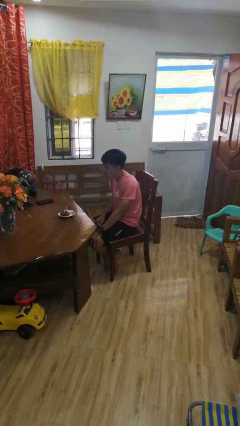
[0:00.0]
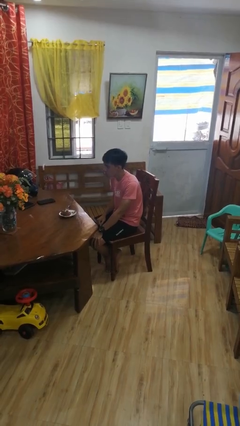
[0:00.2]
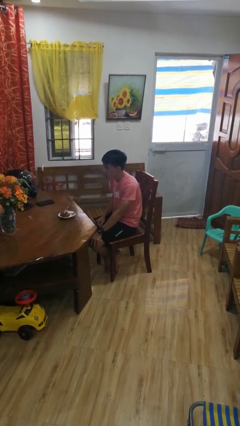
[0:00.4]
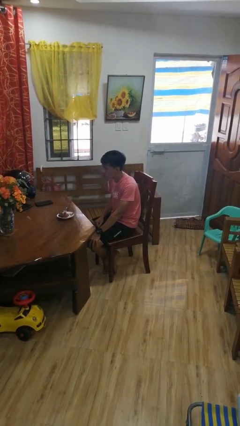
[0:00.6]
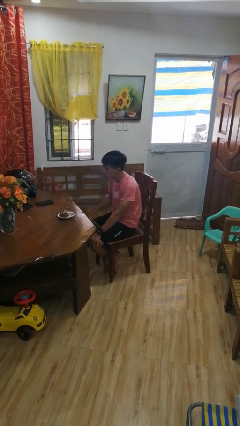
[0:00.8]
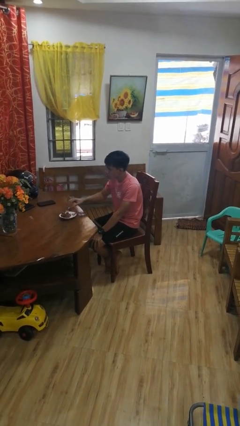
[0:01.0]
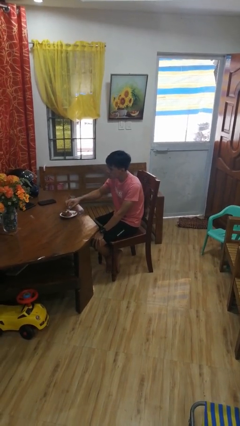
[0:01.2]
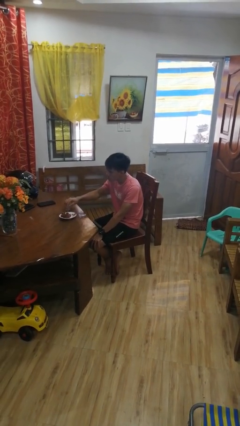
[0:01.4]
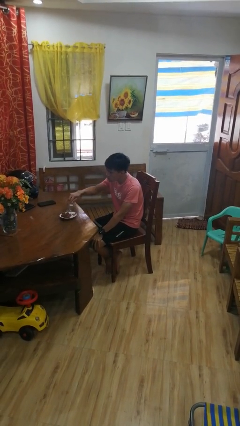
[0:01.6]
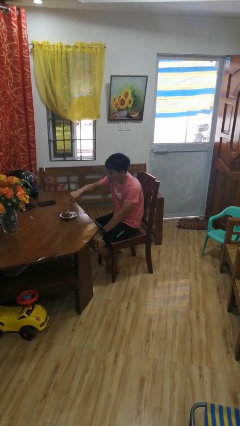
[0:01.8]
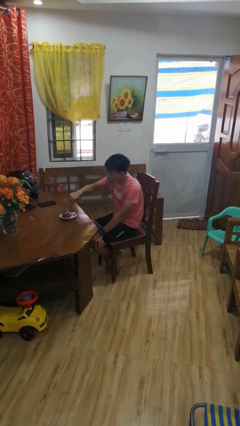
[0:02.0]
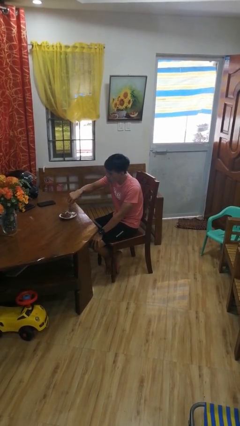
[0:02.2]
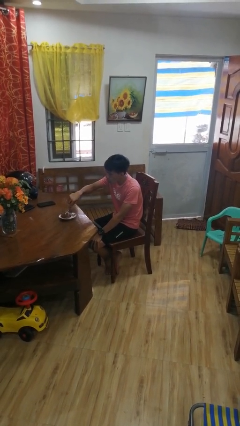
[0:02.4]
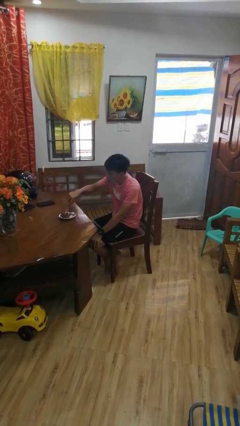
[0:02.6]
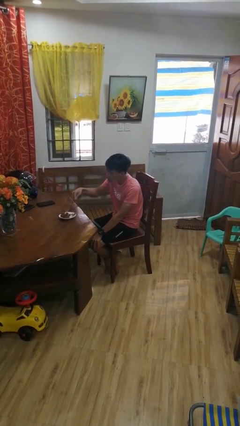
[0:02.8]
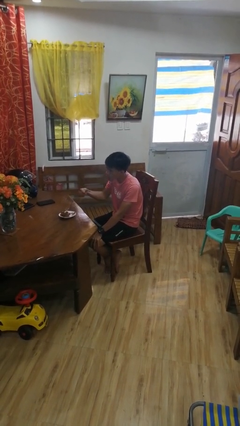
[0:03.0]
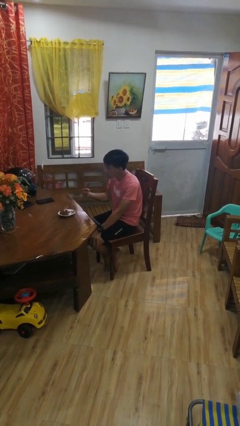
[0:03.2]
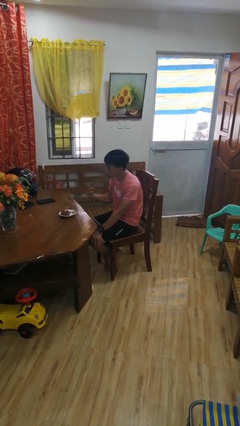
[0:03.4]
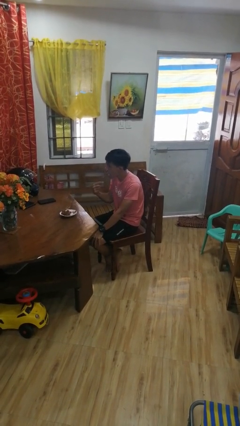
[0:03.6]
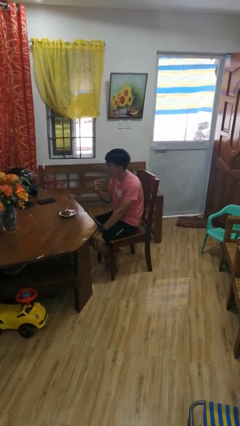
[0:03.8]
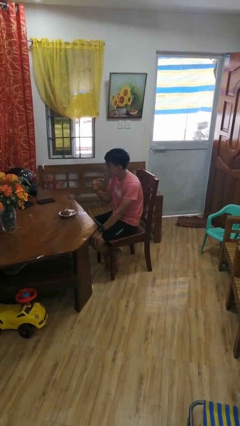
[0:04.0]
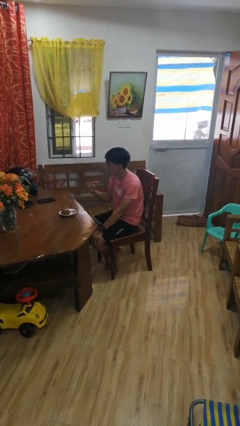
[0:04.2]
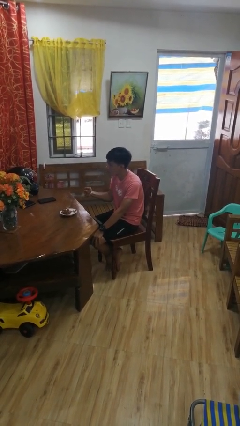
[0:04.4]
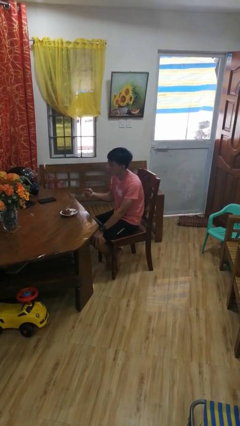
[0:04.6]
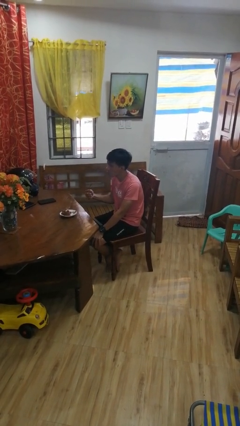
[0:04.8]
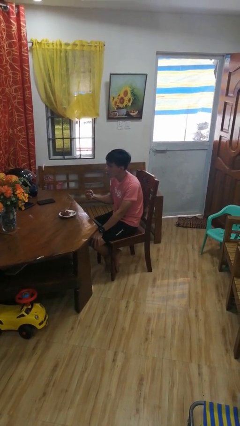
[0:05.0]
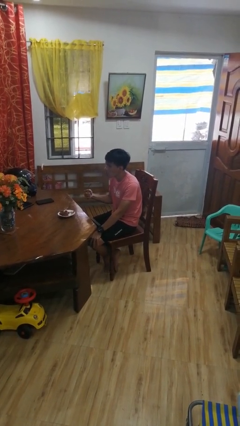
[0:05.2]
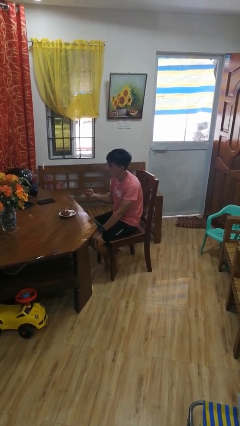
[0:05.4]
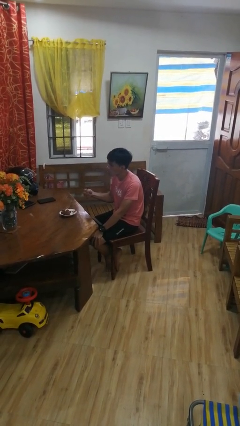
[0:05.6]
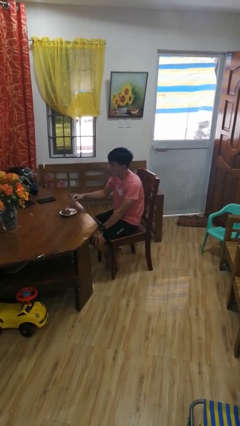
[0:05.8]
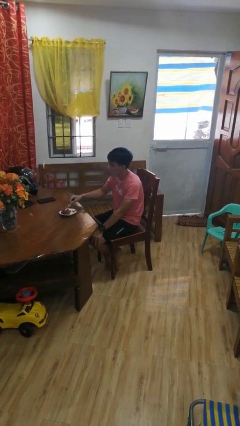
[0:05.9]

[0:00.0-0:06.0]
person eats with utensil

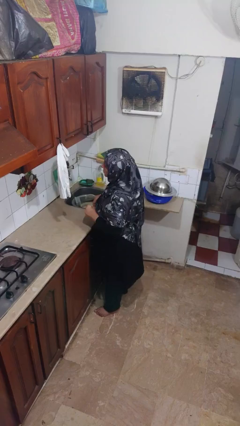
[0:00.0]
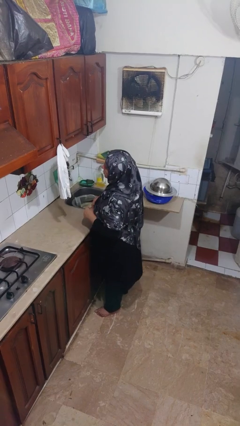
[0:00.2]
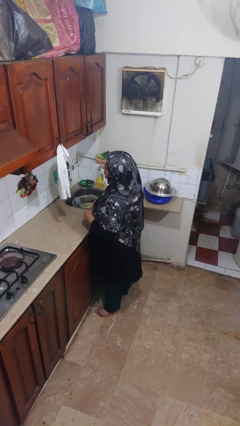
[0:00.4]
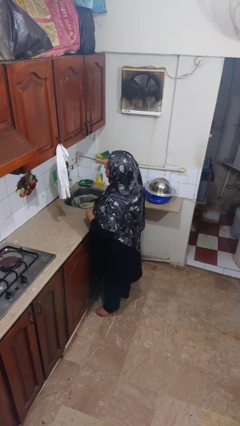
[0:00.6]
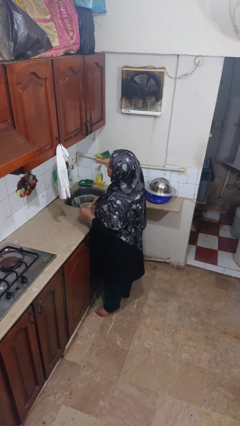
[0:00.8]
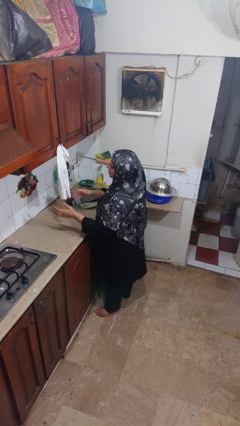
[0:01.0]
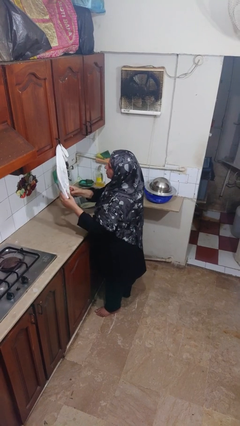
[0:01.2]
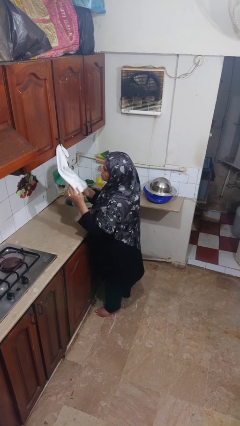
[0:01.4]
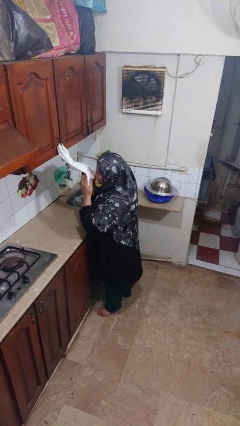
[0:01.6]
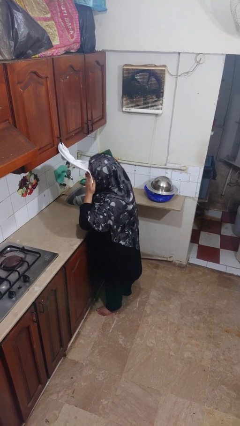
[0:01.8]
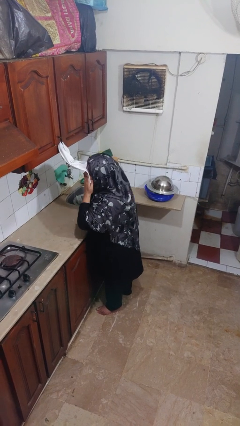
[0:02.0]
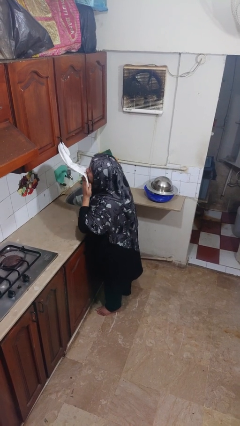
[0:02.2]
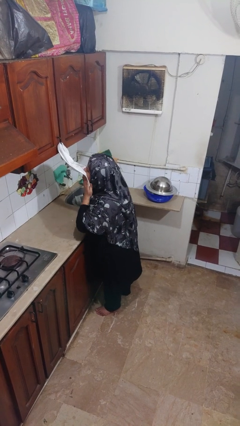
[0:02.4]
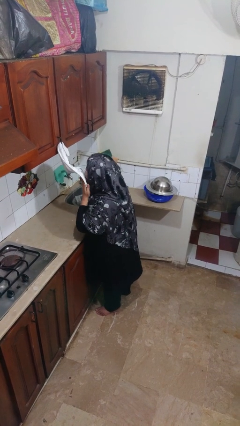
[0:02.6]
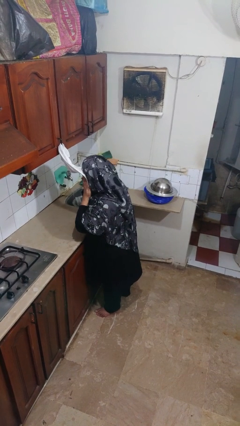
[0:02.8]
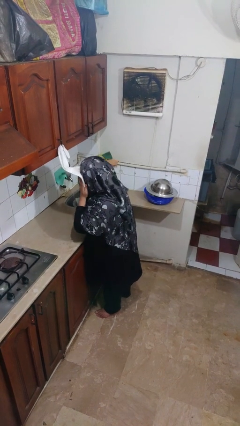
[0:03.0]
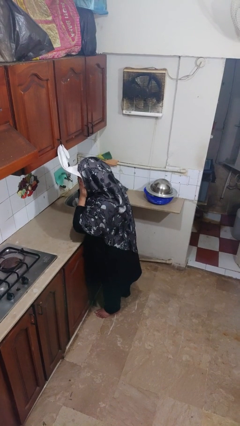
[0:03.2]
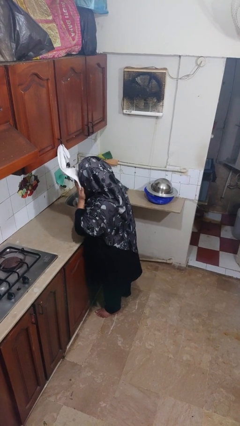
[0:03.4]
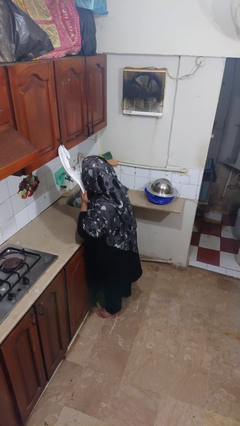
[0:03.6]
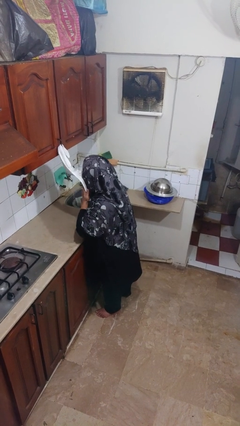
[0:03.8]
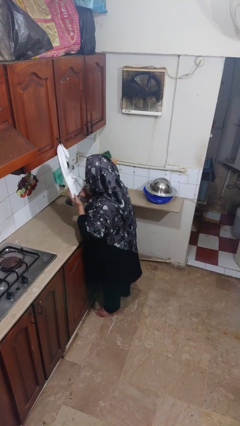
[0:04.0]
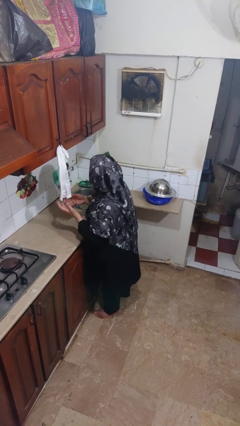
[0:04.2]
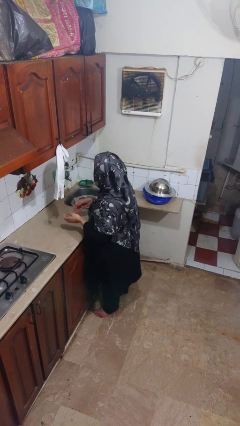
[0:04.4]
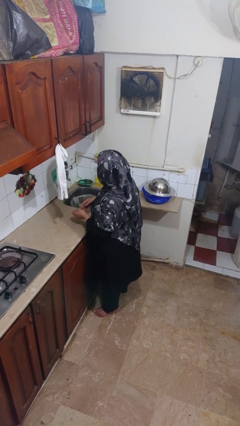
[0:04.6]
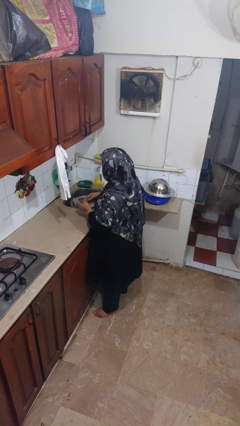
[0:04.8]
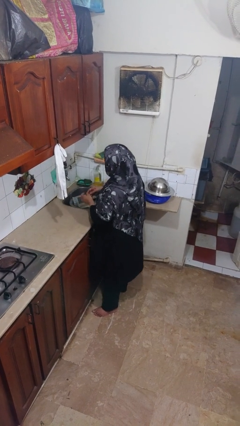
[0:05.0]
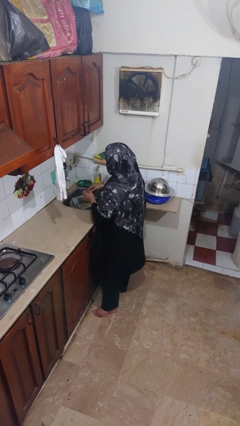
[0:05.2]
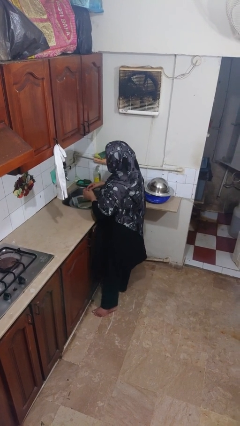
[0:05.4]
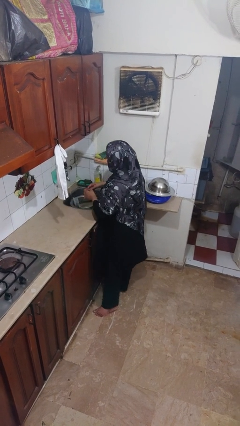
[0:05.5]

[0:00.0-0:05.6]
person dries face with towel

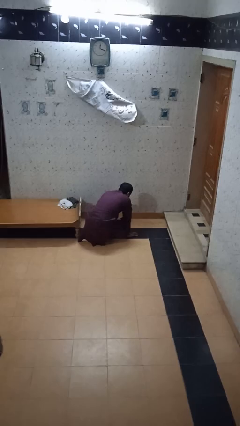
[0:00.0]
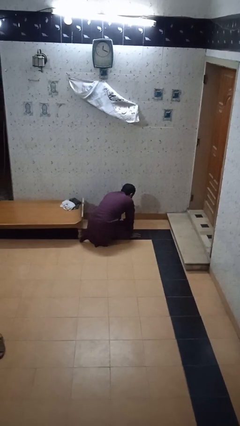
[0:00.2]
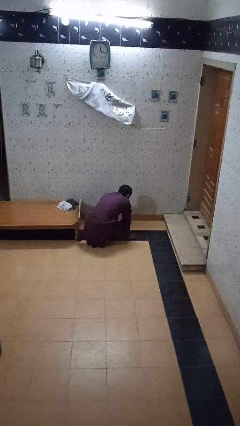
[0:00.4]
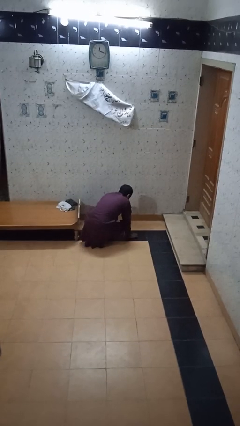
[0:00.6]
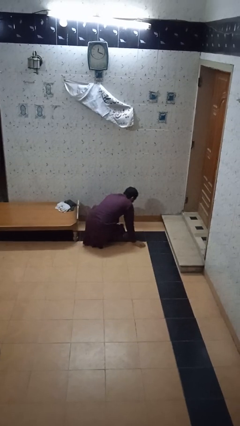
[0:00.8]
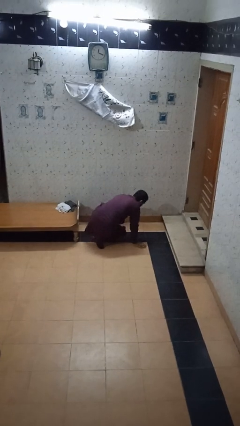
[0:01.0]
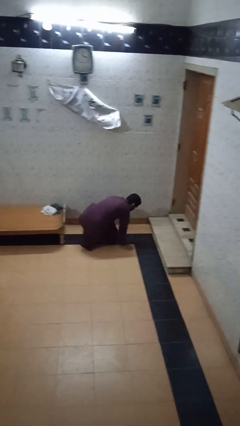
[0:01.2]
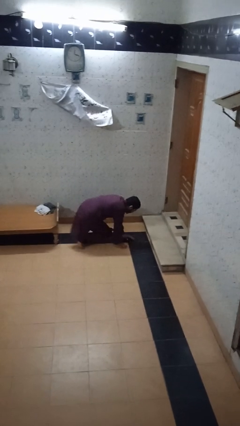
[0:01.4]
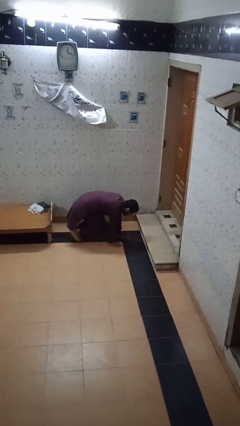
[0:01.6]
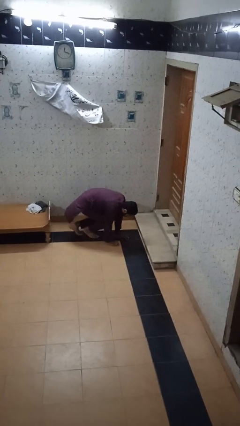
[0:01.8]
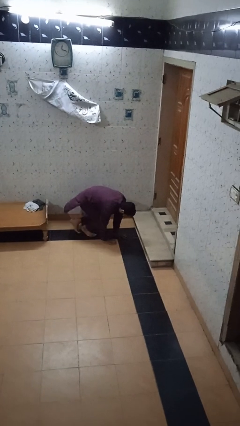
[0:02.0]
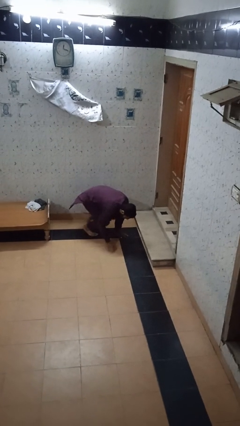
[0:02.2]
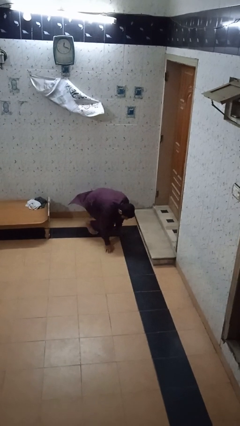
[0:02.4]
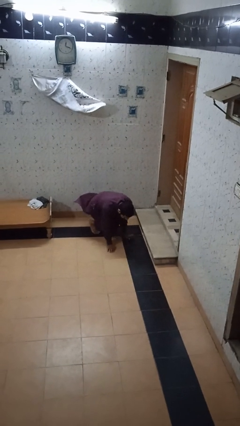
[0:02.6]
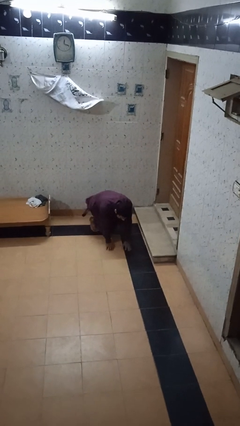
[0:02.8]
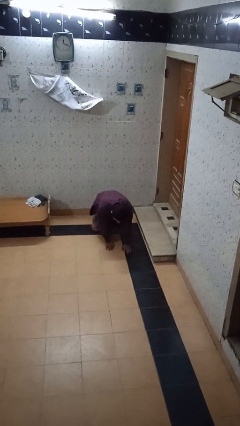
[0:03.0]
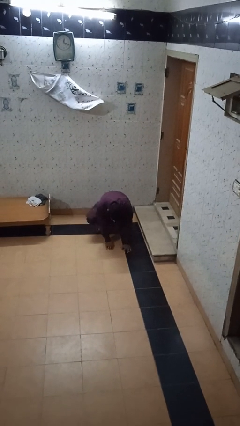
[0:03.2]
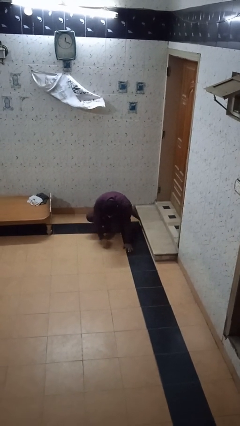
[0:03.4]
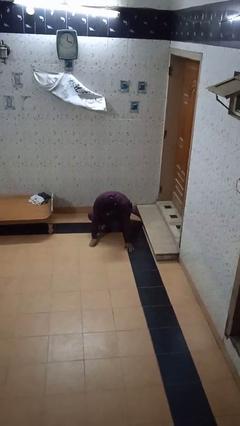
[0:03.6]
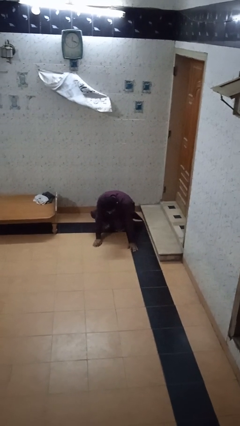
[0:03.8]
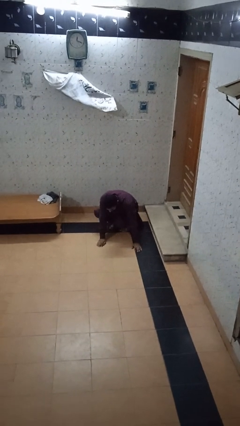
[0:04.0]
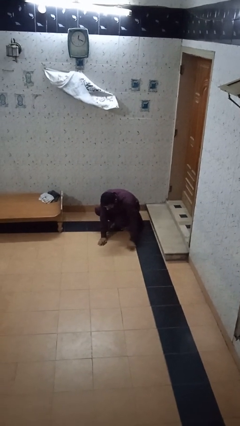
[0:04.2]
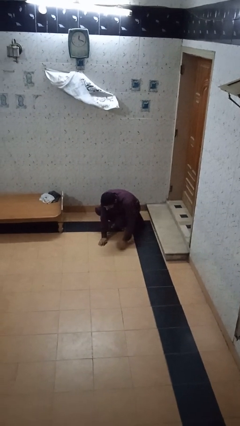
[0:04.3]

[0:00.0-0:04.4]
person crawls

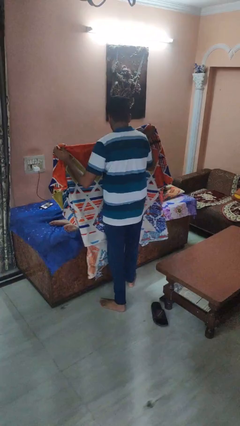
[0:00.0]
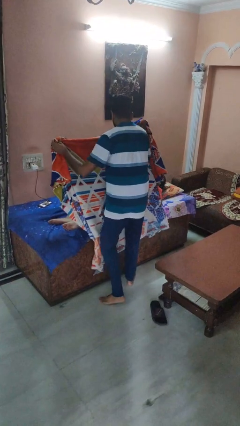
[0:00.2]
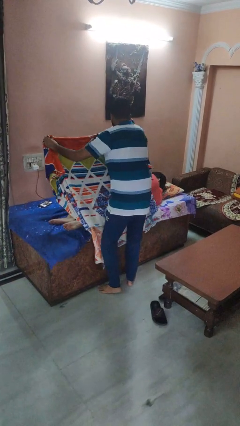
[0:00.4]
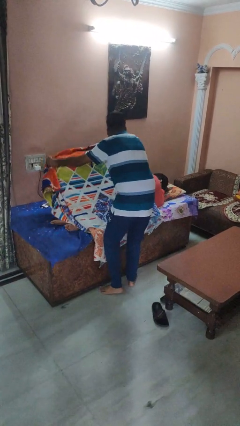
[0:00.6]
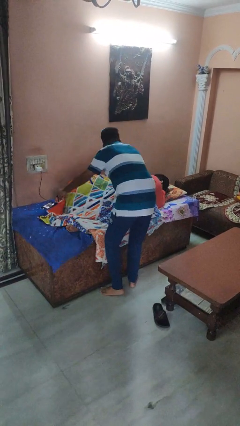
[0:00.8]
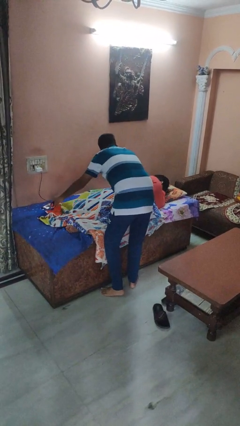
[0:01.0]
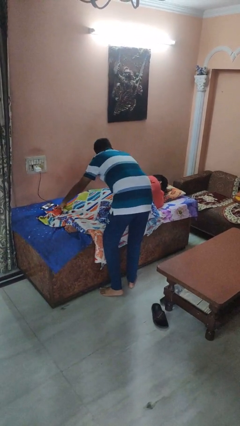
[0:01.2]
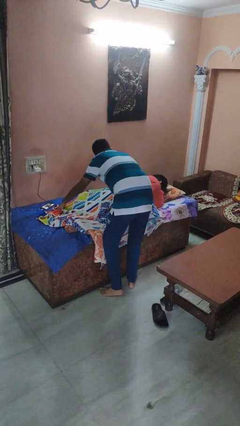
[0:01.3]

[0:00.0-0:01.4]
person covers friend with blanket

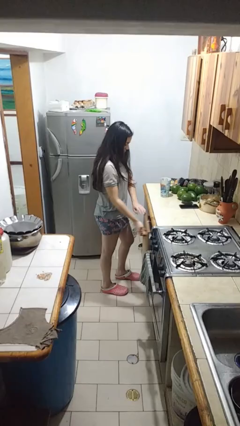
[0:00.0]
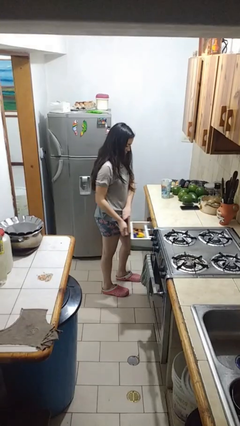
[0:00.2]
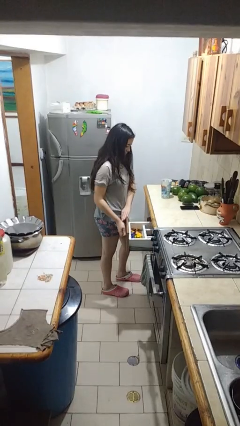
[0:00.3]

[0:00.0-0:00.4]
person opens kitchen drawer

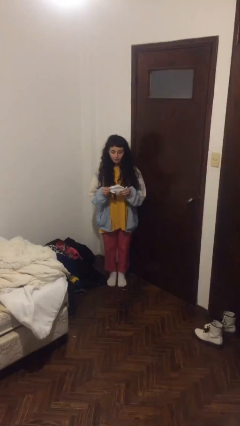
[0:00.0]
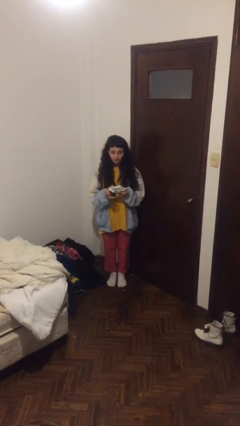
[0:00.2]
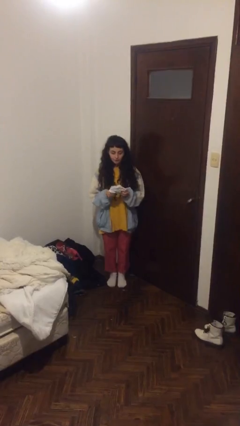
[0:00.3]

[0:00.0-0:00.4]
person crumples paper
